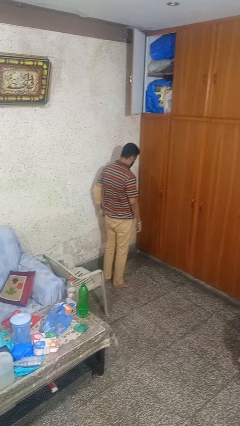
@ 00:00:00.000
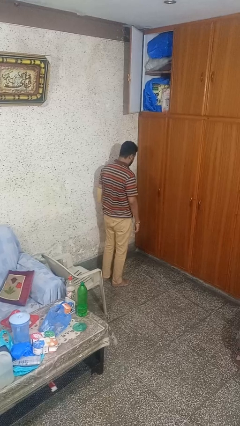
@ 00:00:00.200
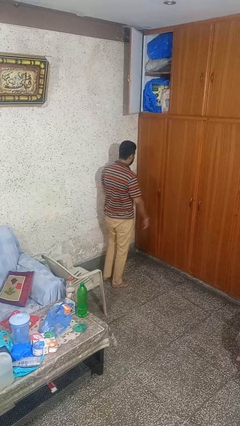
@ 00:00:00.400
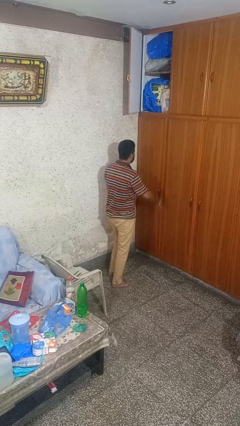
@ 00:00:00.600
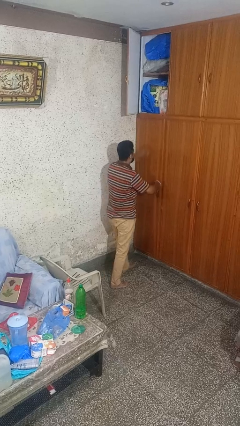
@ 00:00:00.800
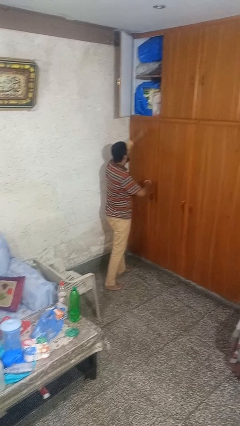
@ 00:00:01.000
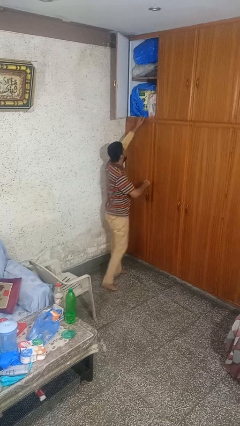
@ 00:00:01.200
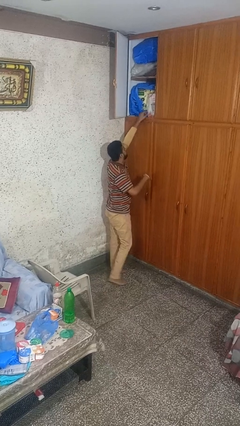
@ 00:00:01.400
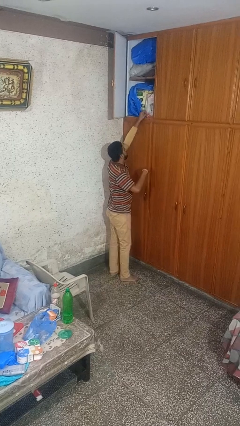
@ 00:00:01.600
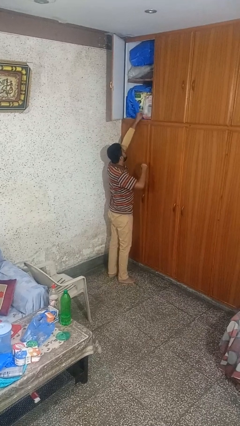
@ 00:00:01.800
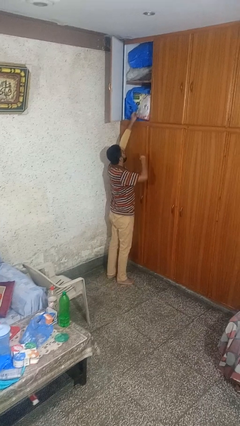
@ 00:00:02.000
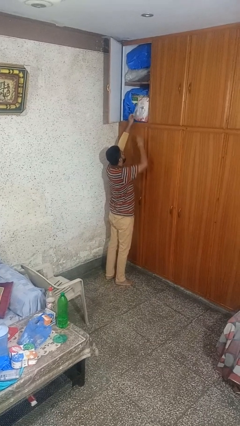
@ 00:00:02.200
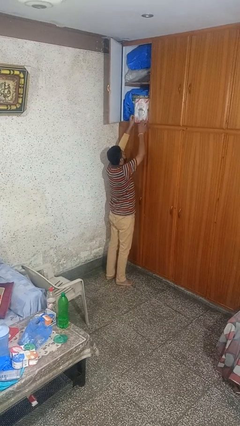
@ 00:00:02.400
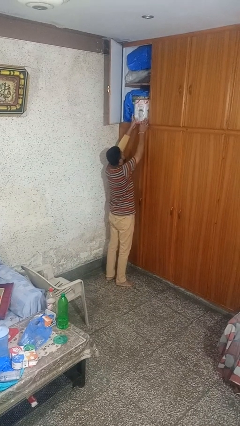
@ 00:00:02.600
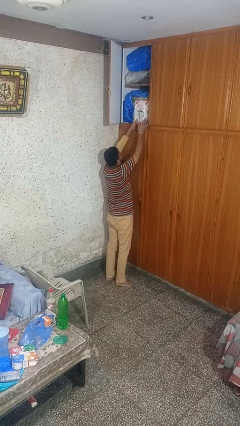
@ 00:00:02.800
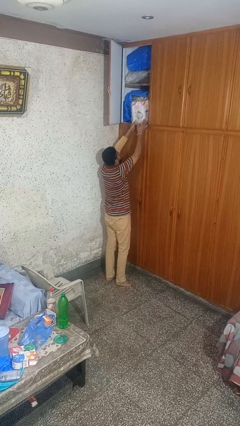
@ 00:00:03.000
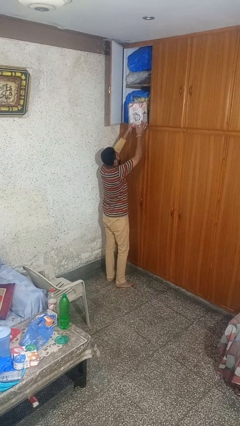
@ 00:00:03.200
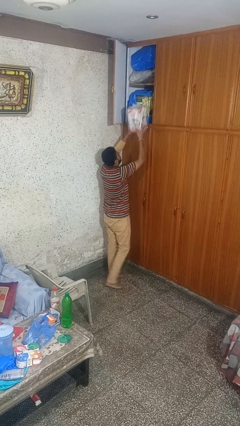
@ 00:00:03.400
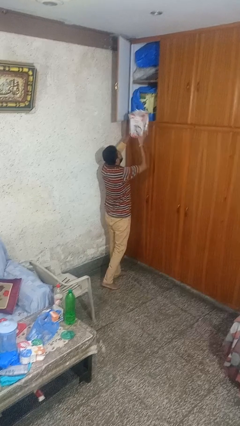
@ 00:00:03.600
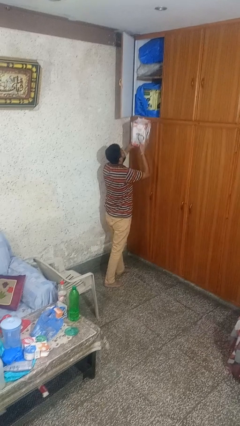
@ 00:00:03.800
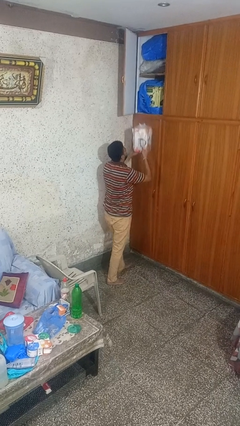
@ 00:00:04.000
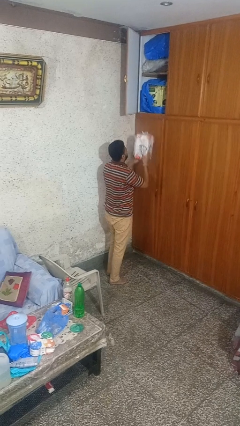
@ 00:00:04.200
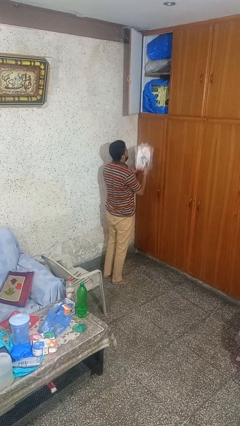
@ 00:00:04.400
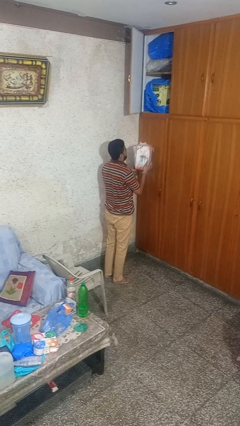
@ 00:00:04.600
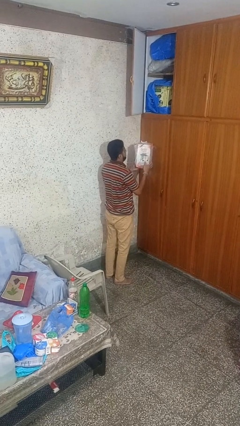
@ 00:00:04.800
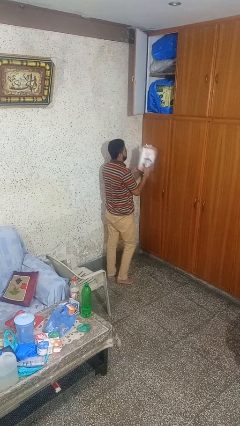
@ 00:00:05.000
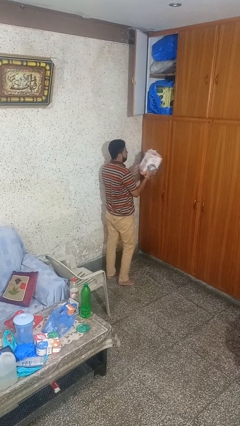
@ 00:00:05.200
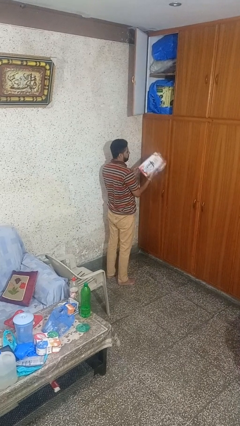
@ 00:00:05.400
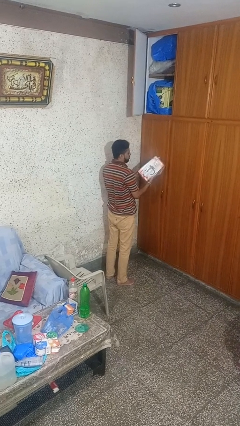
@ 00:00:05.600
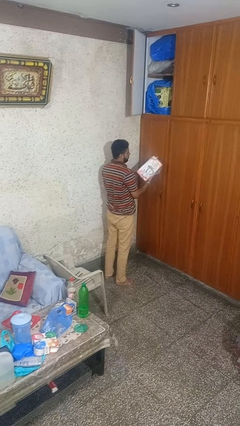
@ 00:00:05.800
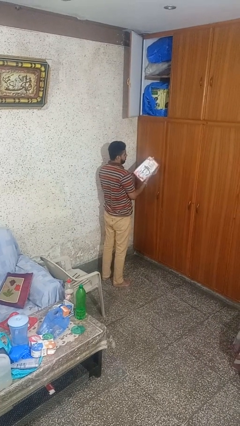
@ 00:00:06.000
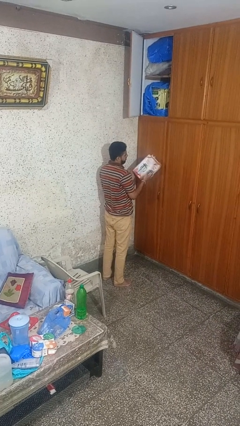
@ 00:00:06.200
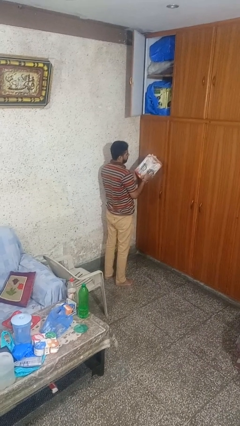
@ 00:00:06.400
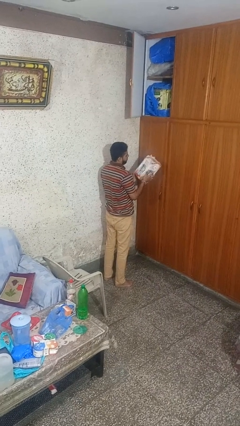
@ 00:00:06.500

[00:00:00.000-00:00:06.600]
person picks up object from countertop

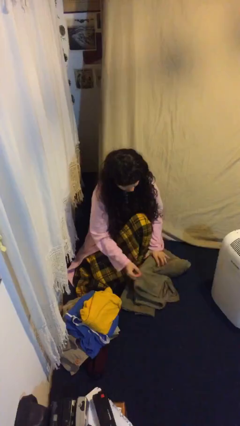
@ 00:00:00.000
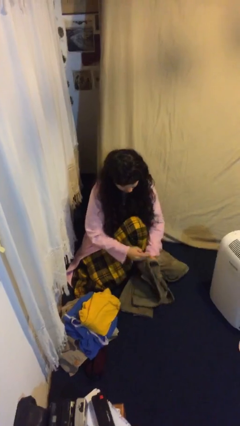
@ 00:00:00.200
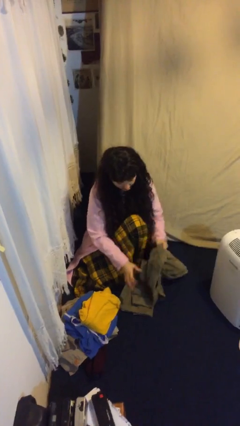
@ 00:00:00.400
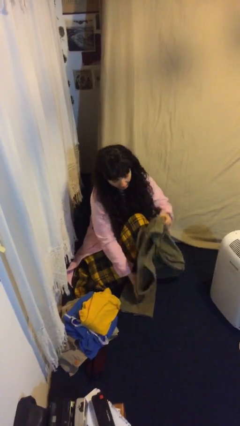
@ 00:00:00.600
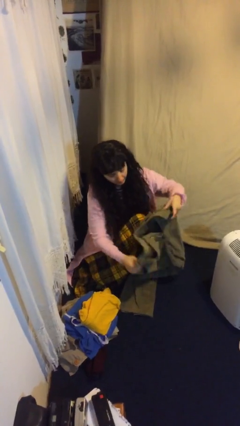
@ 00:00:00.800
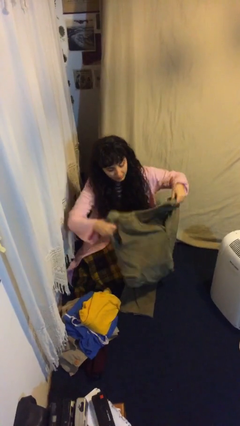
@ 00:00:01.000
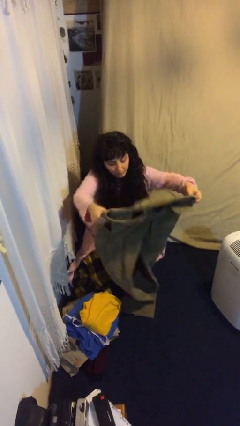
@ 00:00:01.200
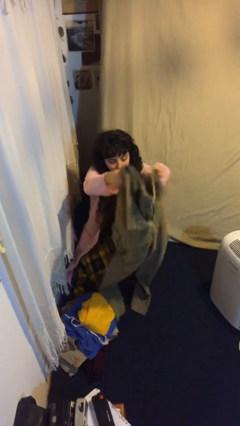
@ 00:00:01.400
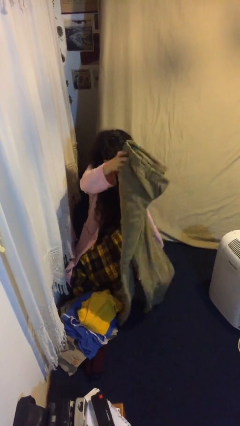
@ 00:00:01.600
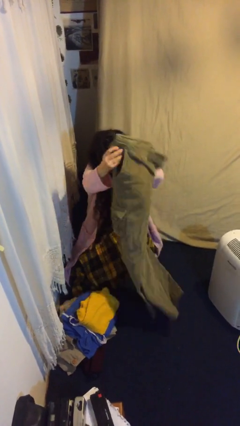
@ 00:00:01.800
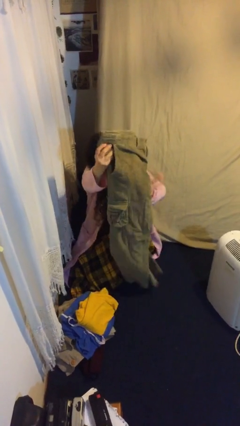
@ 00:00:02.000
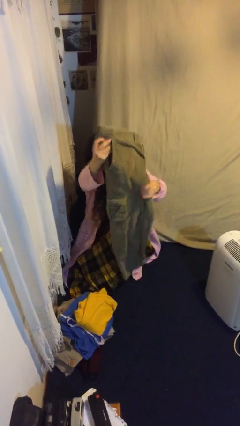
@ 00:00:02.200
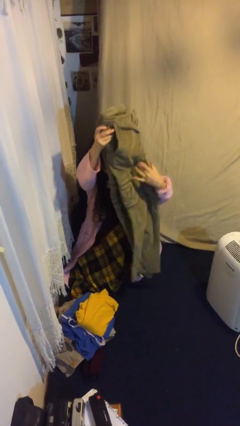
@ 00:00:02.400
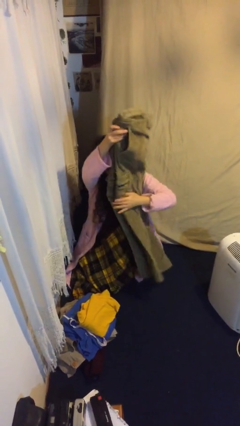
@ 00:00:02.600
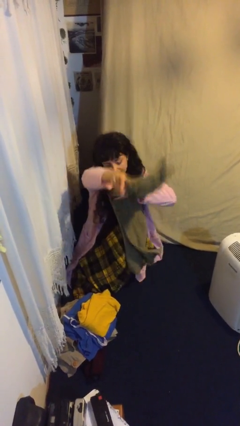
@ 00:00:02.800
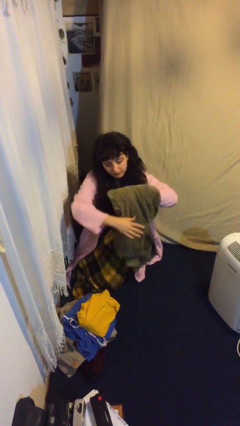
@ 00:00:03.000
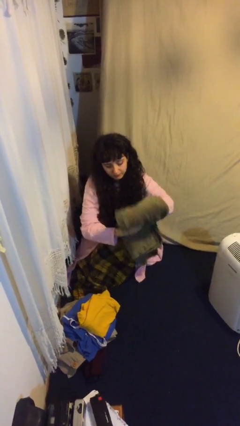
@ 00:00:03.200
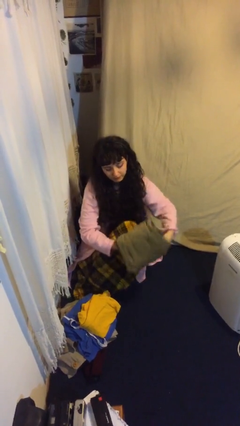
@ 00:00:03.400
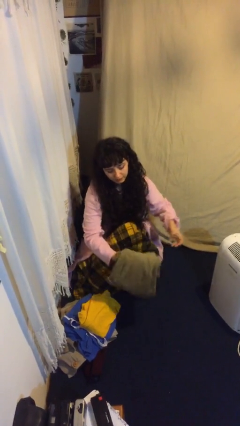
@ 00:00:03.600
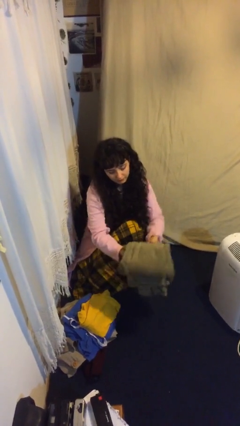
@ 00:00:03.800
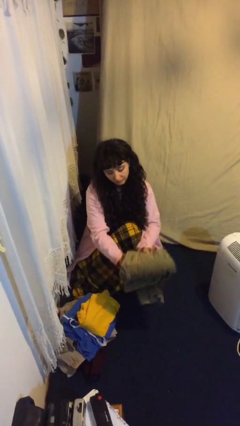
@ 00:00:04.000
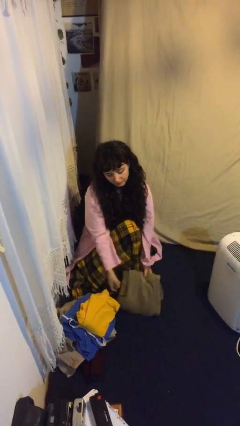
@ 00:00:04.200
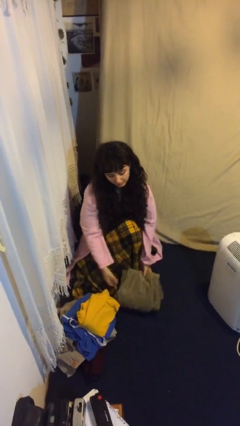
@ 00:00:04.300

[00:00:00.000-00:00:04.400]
person folds pants

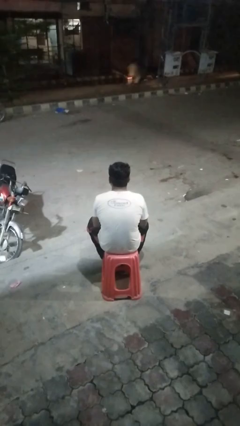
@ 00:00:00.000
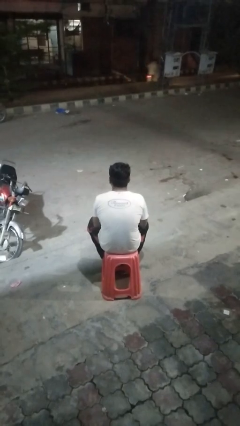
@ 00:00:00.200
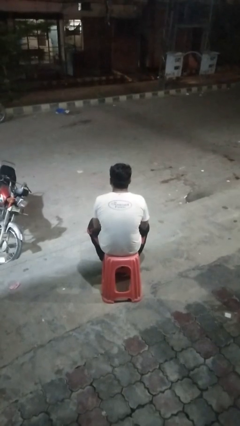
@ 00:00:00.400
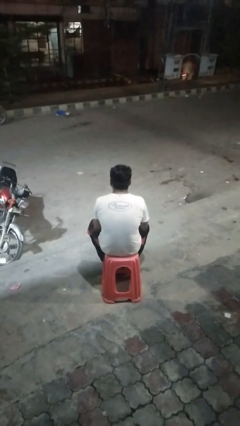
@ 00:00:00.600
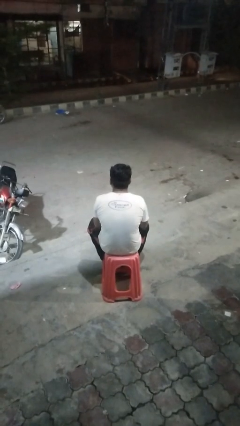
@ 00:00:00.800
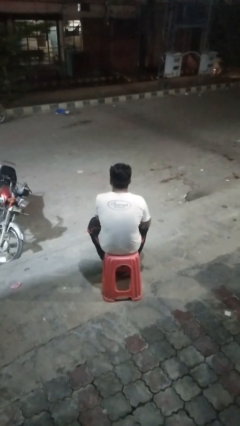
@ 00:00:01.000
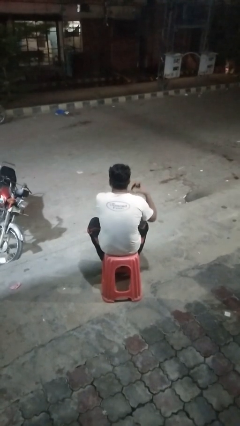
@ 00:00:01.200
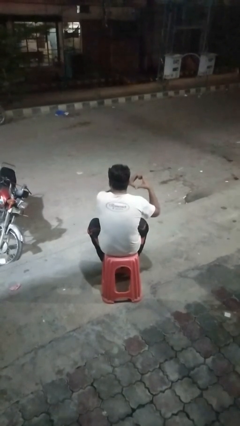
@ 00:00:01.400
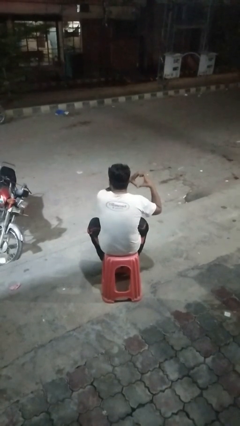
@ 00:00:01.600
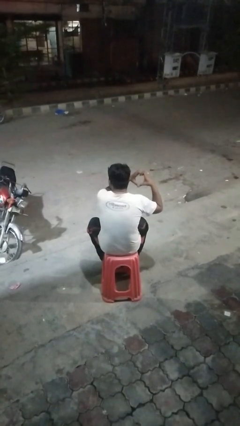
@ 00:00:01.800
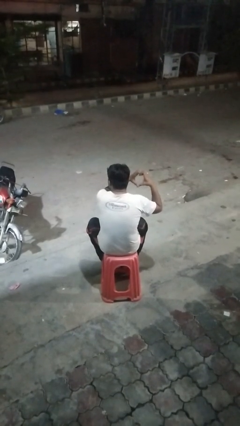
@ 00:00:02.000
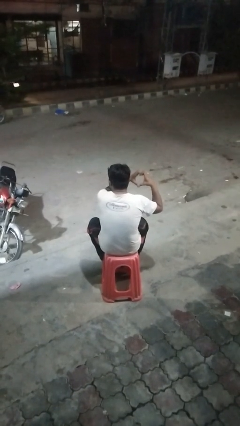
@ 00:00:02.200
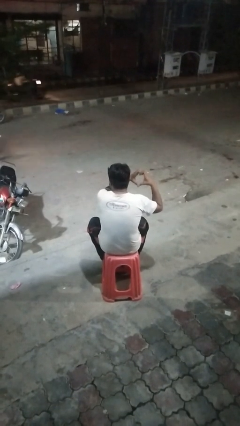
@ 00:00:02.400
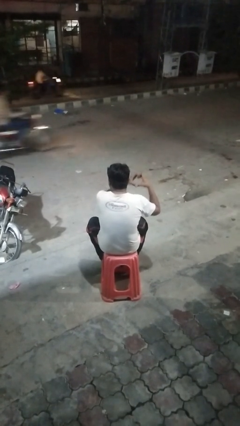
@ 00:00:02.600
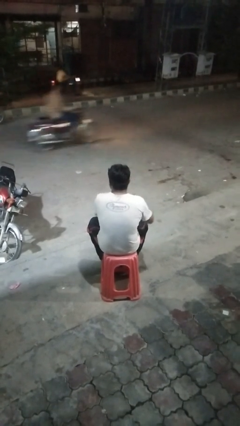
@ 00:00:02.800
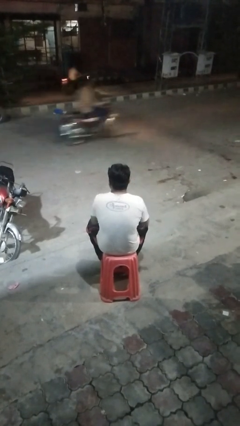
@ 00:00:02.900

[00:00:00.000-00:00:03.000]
person gestures heart

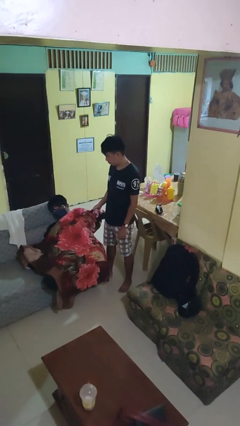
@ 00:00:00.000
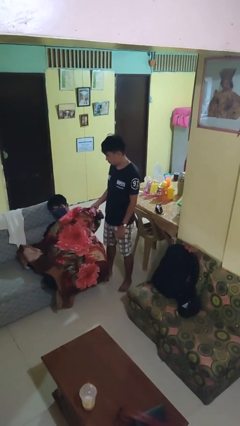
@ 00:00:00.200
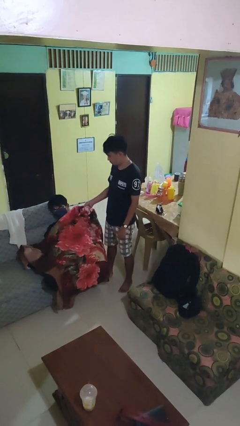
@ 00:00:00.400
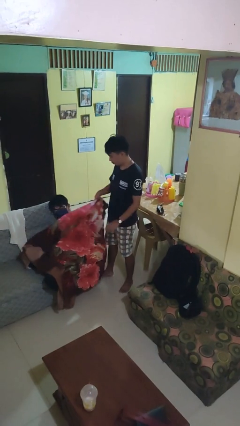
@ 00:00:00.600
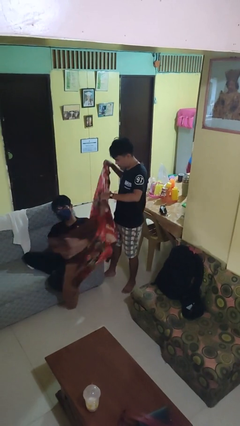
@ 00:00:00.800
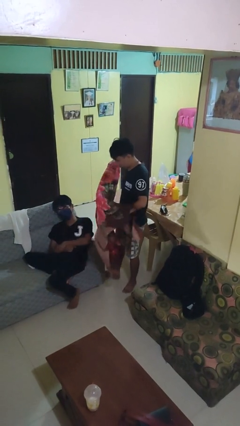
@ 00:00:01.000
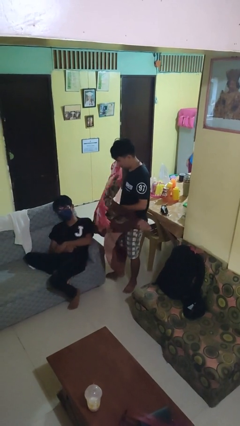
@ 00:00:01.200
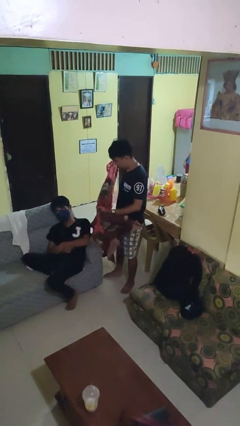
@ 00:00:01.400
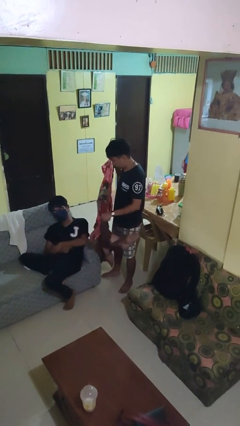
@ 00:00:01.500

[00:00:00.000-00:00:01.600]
person uncovers friend with blanket

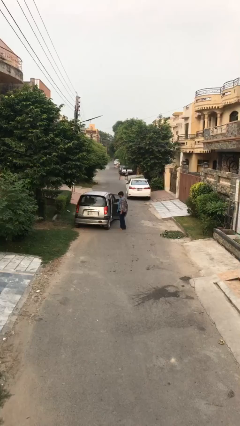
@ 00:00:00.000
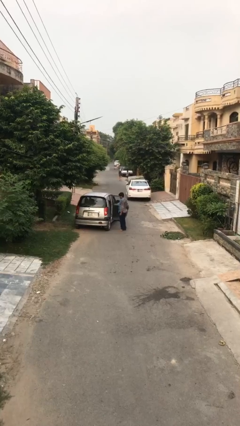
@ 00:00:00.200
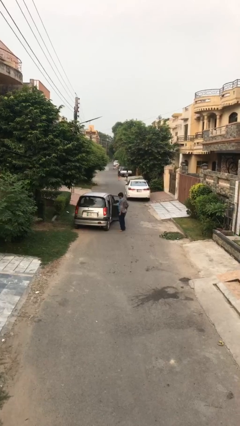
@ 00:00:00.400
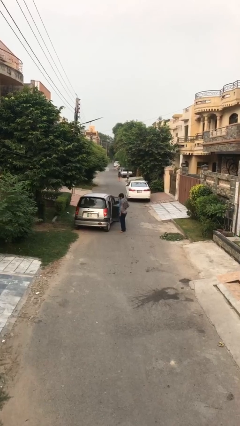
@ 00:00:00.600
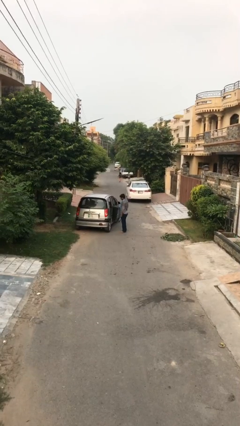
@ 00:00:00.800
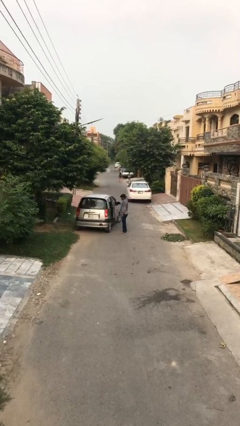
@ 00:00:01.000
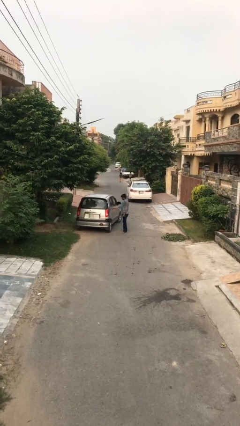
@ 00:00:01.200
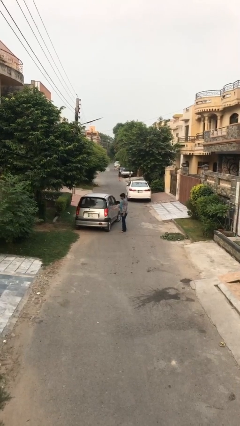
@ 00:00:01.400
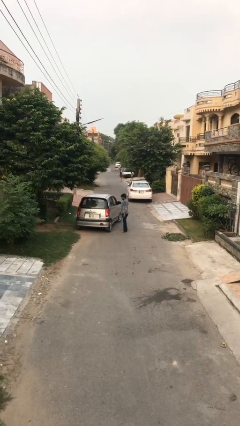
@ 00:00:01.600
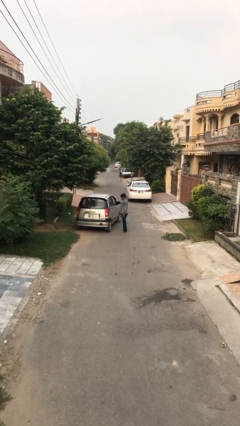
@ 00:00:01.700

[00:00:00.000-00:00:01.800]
person closes car door
